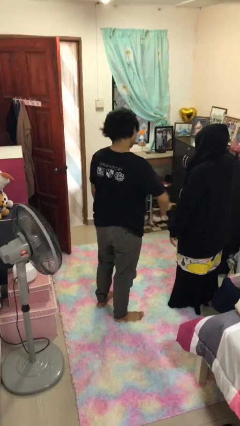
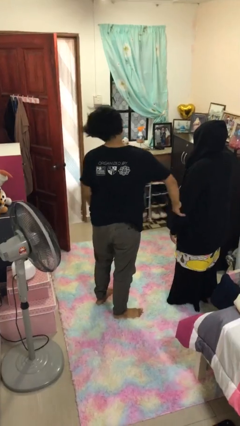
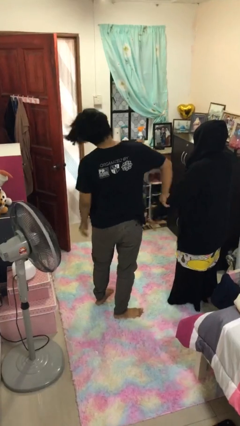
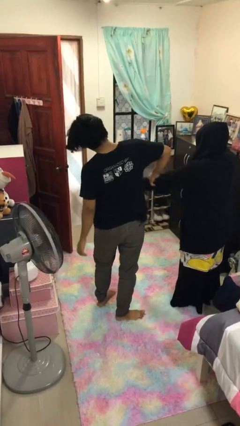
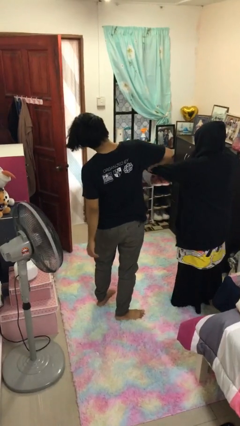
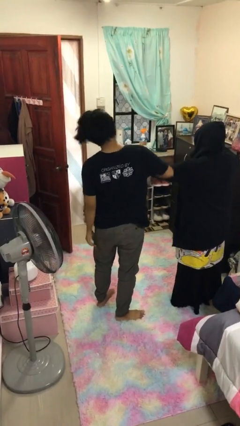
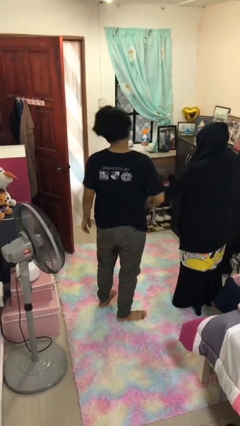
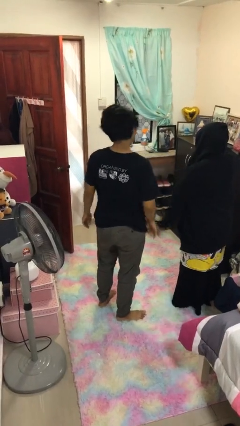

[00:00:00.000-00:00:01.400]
person grabs person by forearm

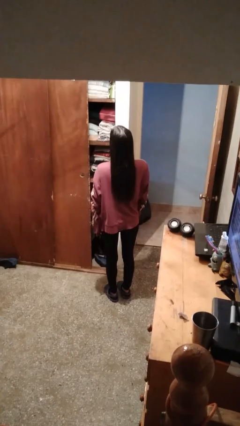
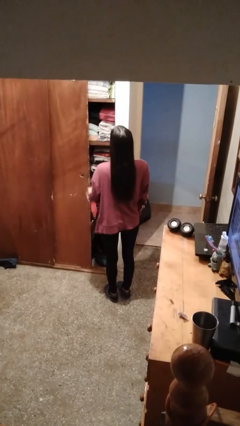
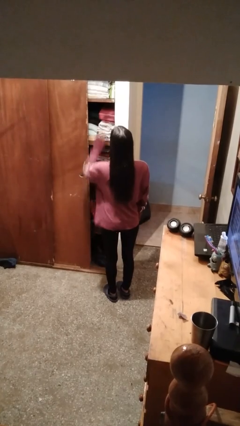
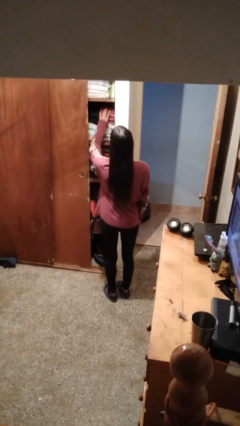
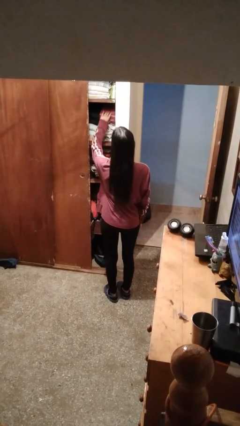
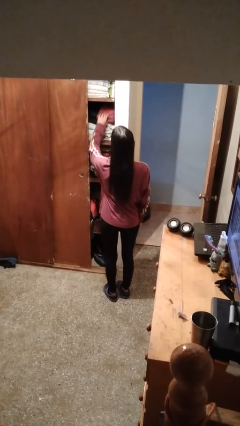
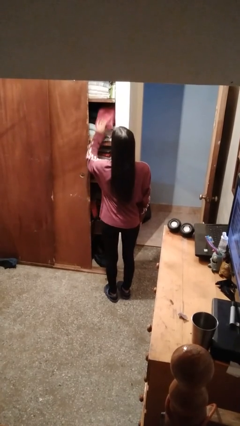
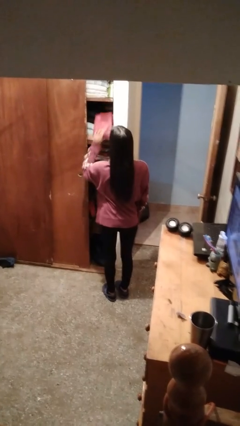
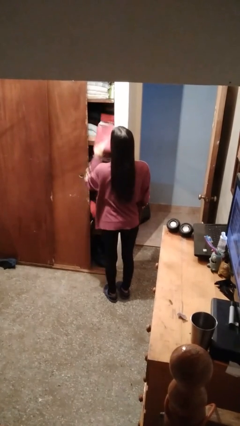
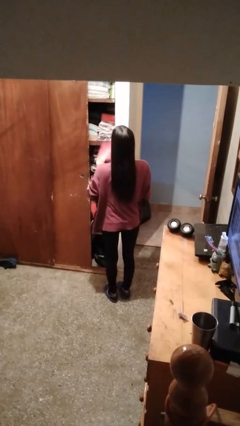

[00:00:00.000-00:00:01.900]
person puts down object on shelf

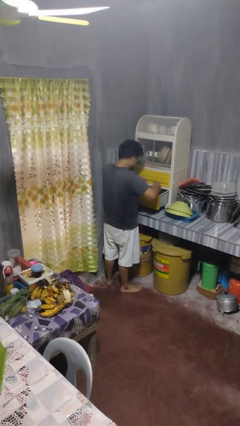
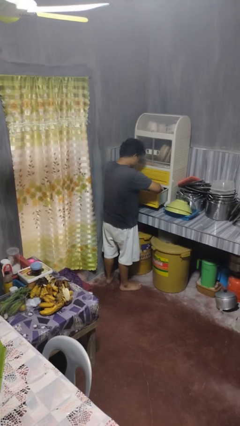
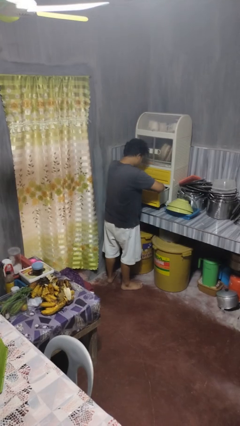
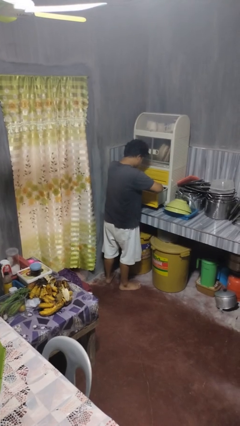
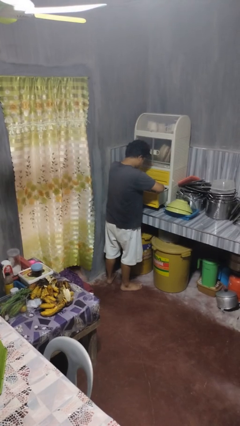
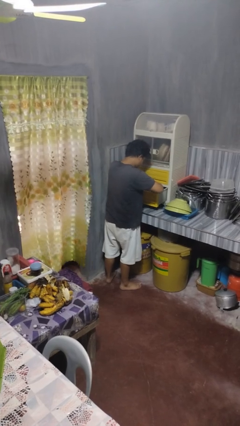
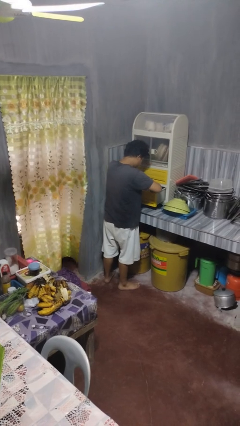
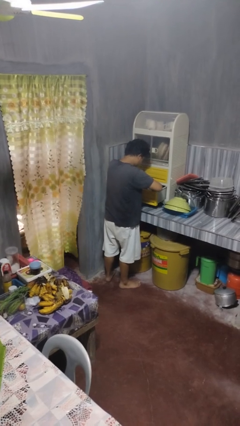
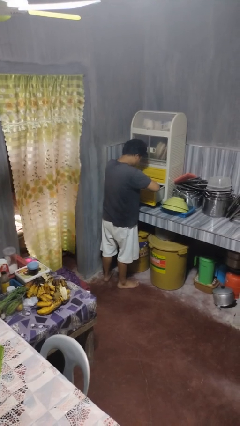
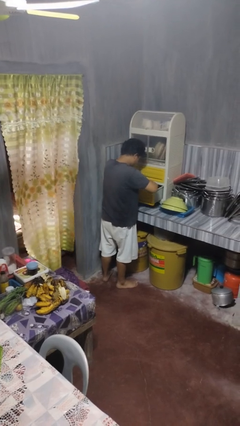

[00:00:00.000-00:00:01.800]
person searches in kitchen drawer

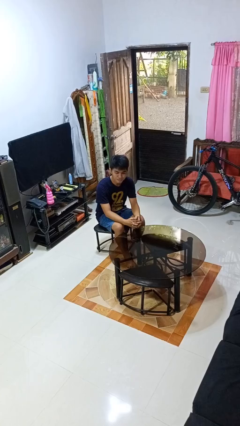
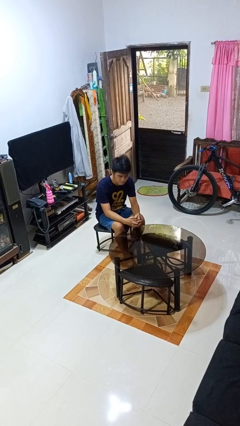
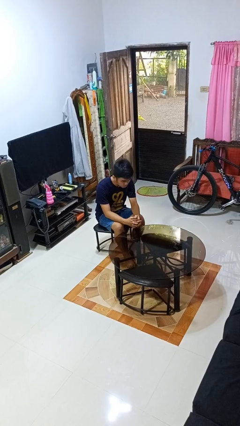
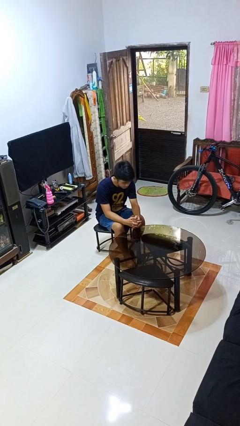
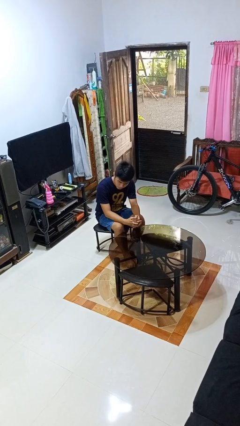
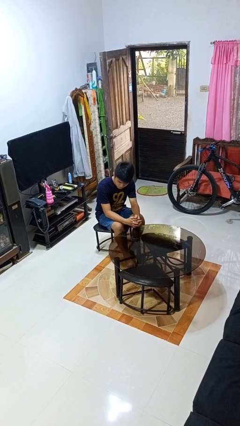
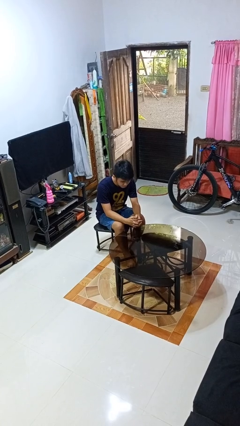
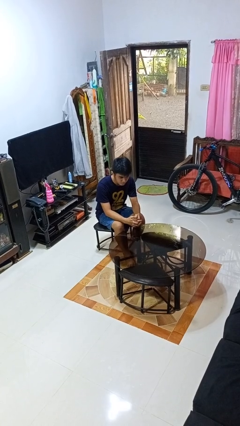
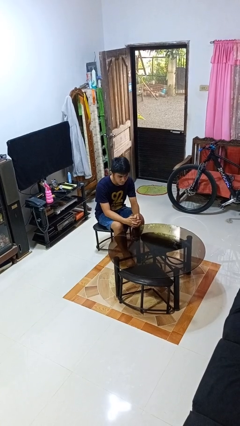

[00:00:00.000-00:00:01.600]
person shakes head

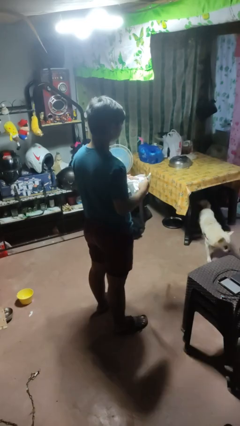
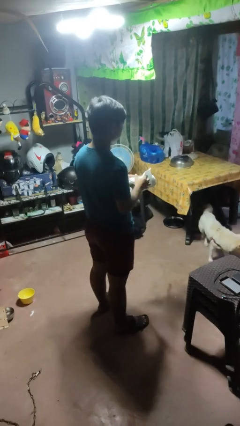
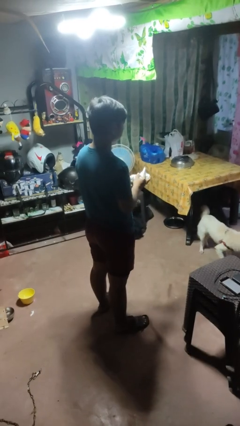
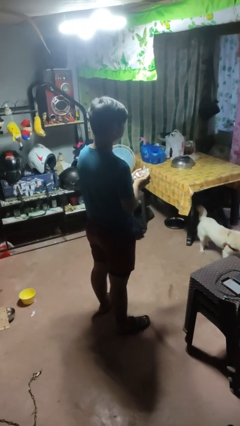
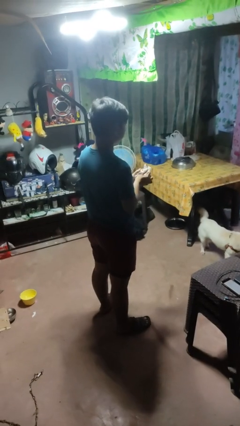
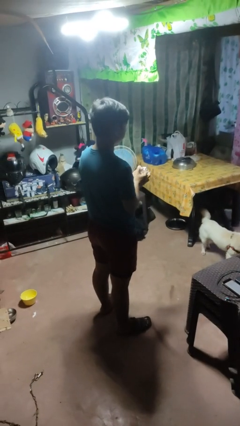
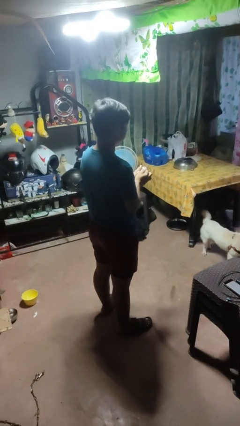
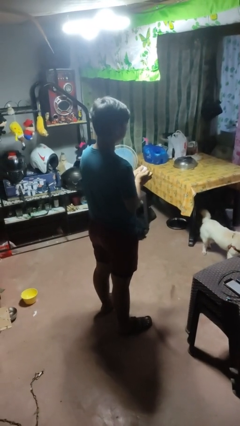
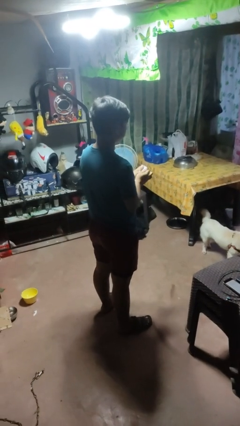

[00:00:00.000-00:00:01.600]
person crumples paper

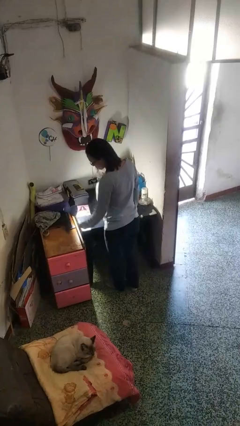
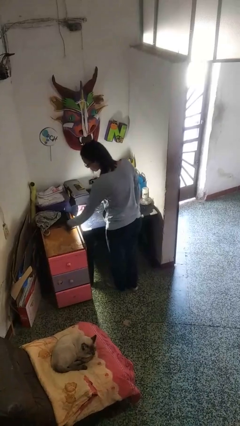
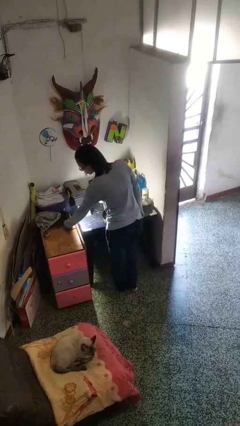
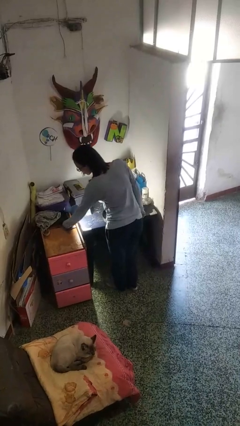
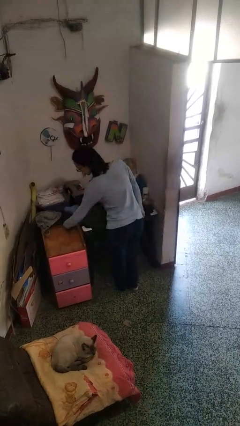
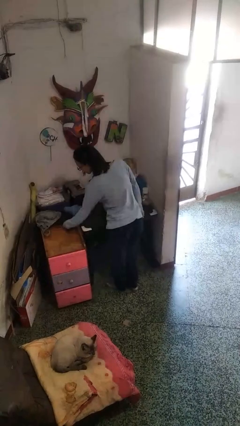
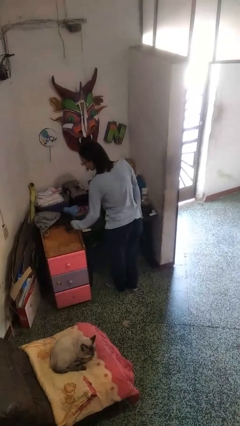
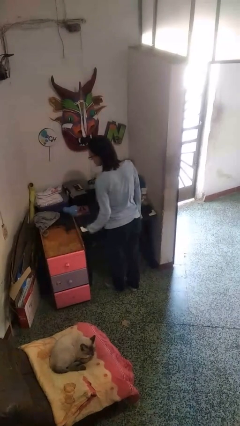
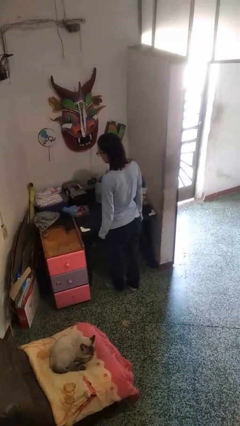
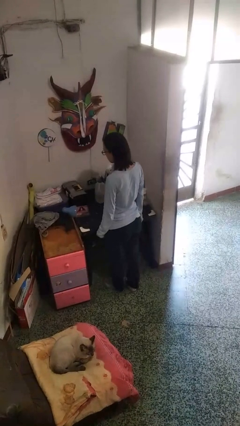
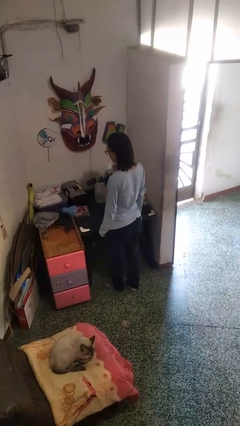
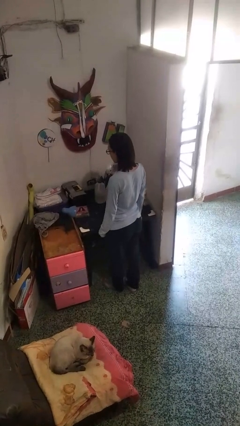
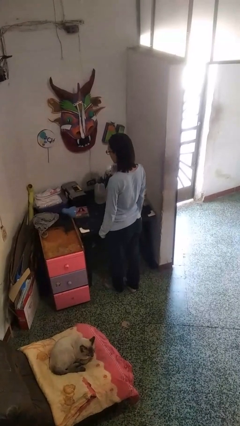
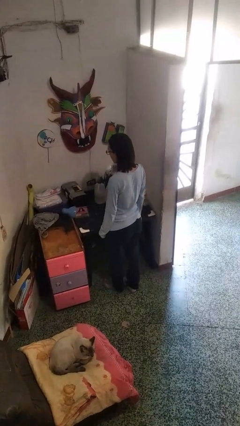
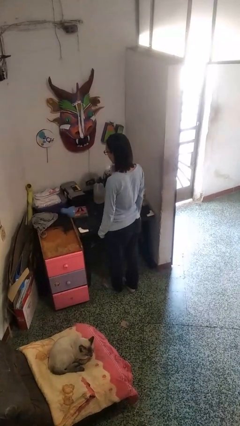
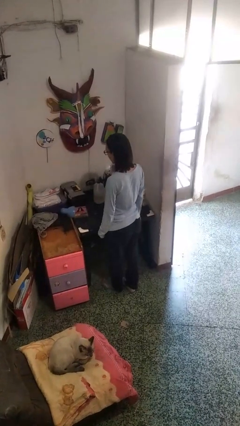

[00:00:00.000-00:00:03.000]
person turns off lamp

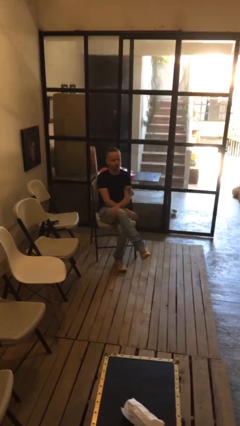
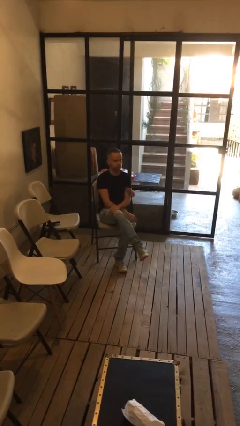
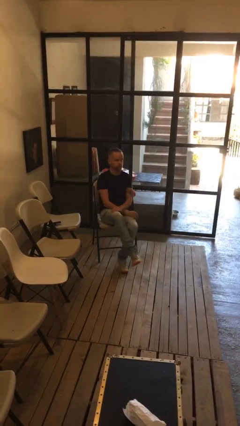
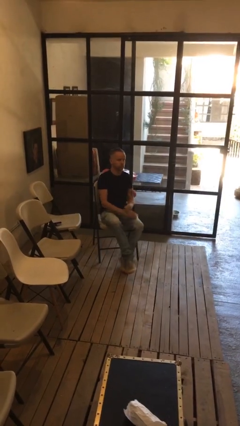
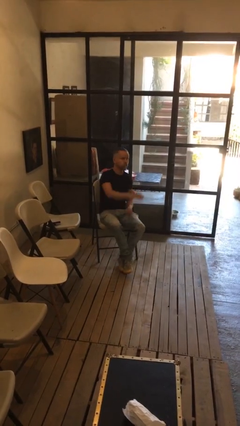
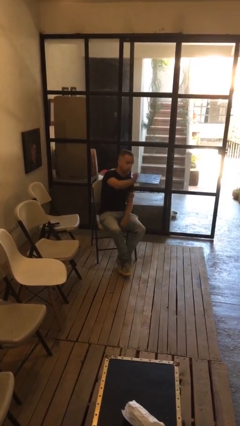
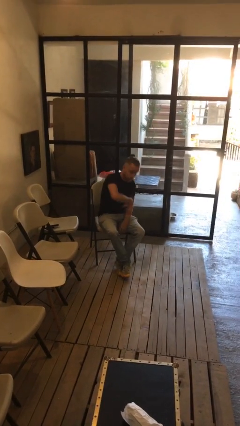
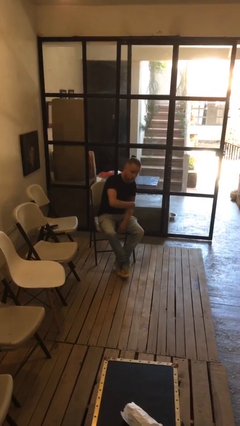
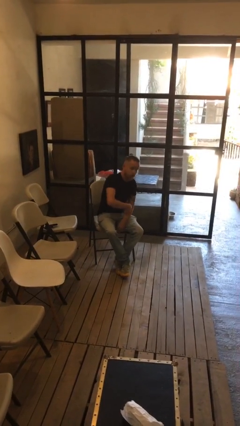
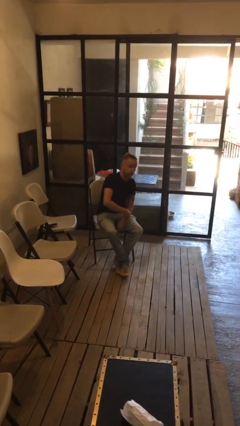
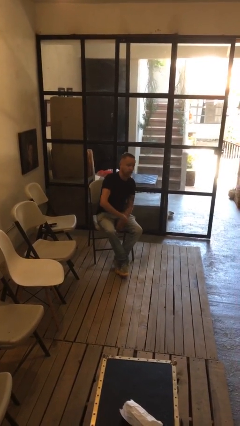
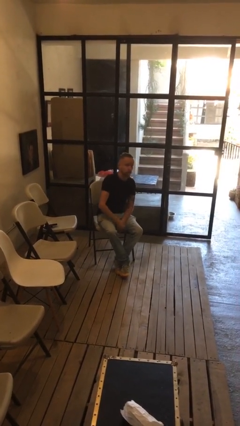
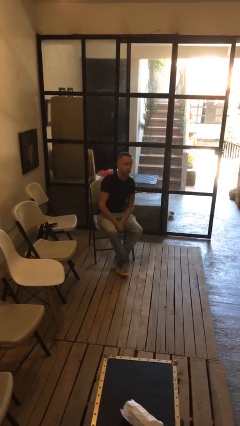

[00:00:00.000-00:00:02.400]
person gestures come here

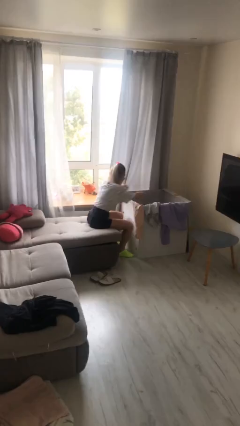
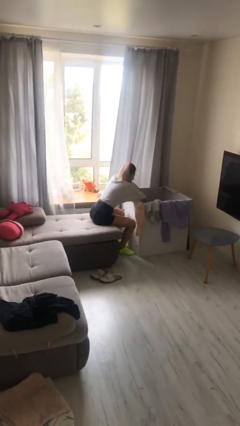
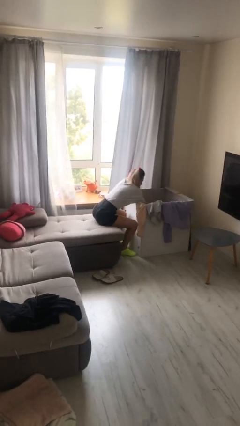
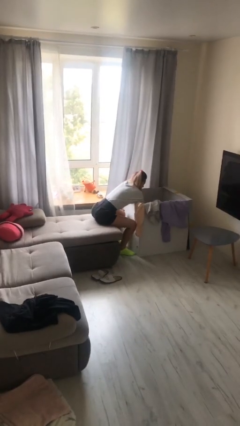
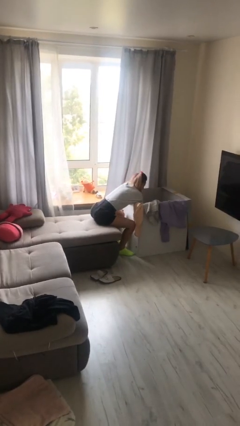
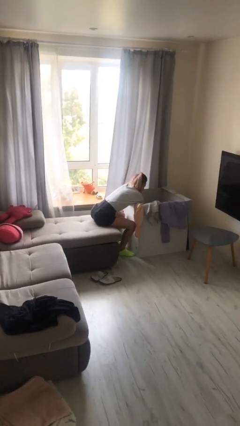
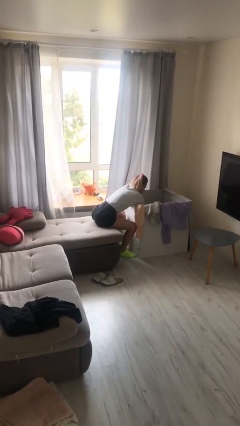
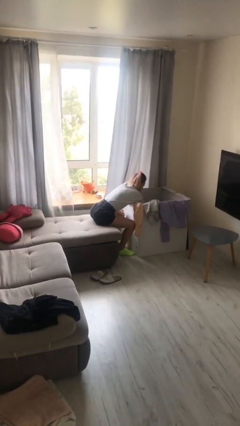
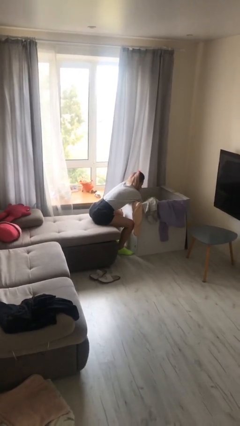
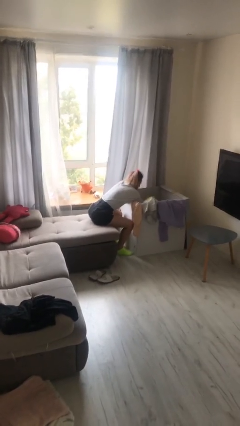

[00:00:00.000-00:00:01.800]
person searches in box

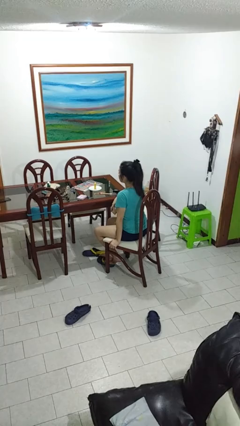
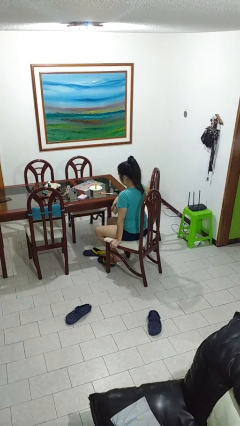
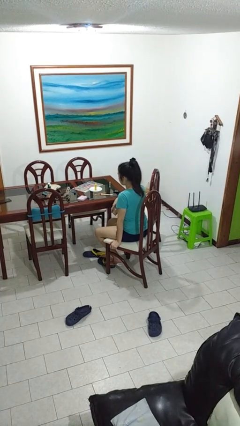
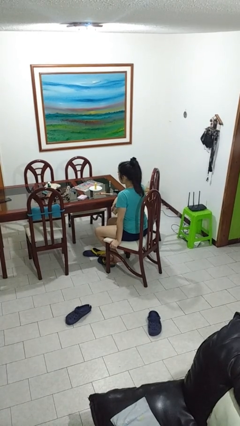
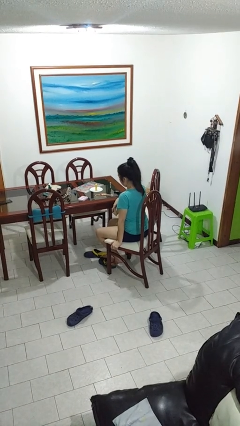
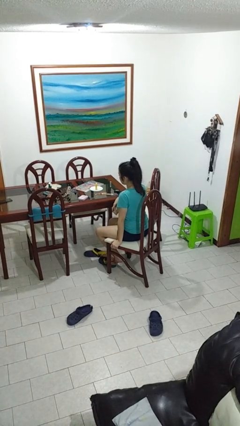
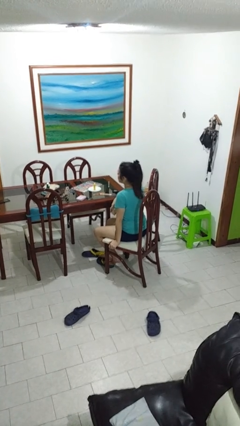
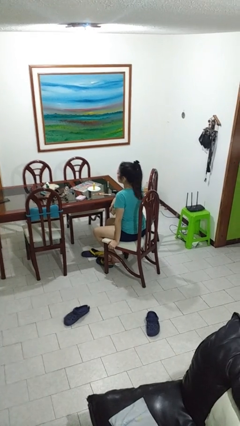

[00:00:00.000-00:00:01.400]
person nods head
